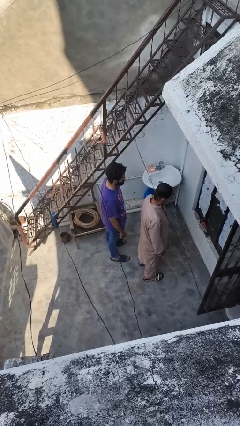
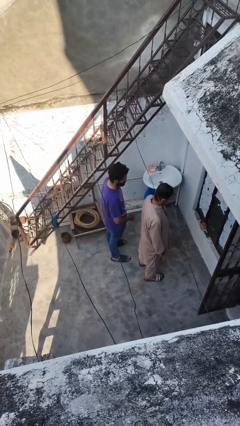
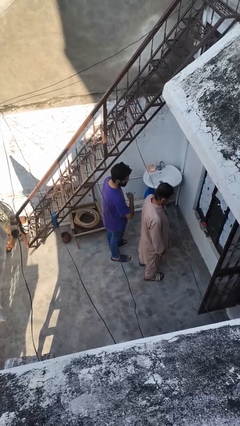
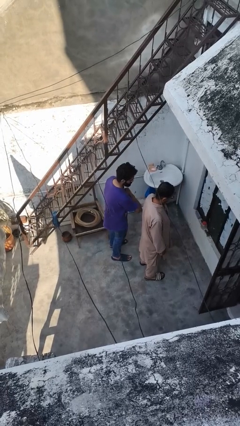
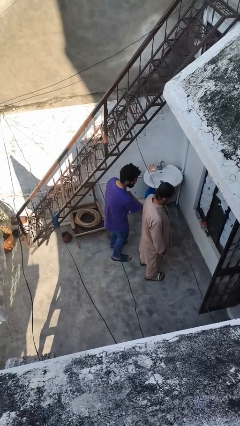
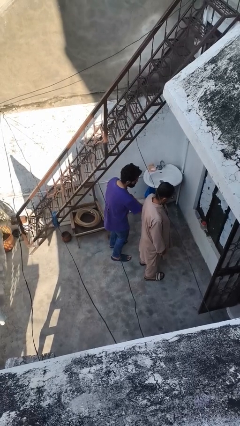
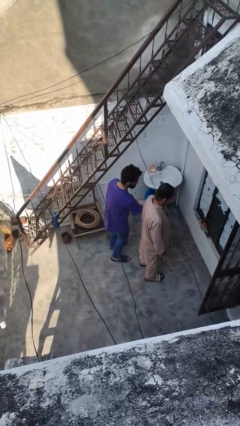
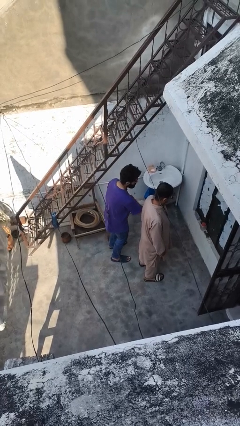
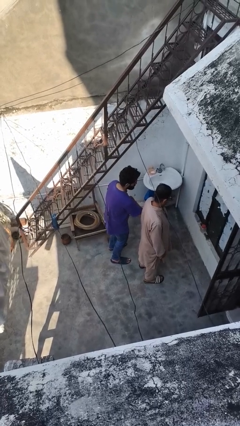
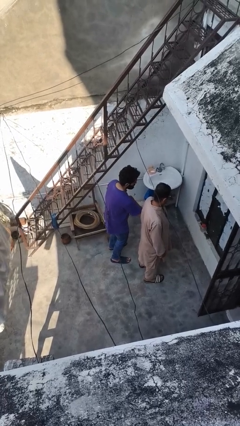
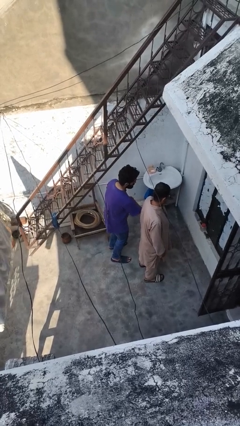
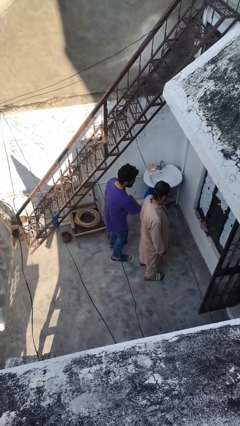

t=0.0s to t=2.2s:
person nudges person with elbow

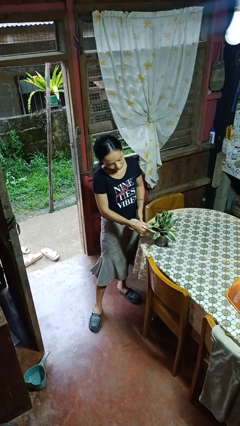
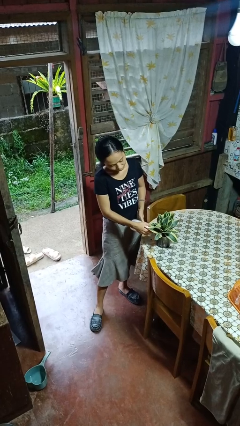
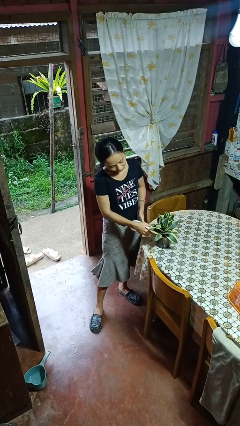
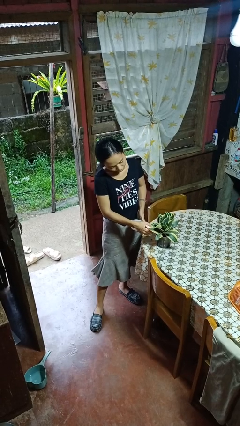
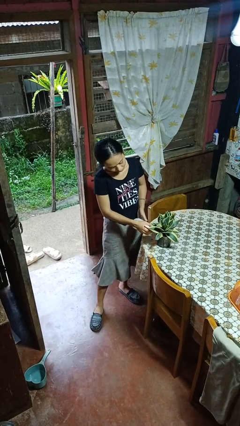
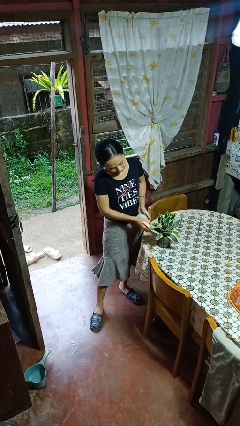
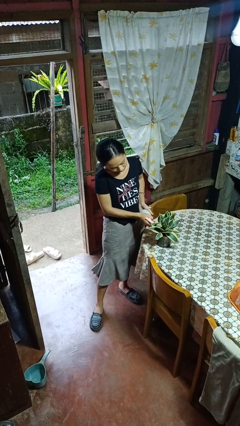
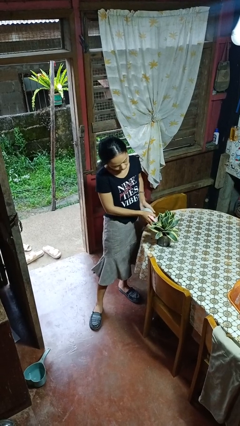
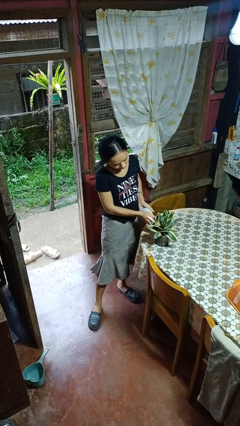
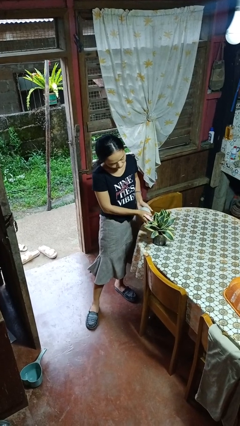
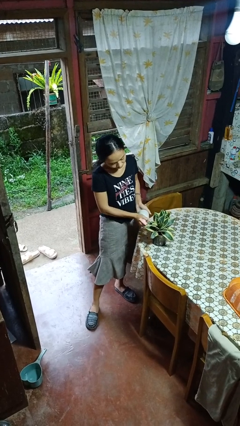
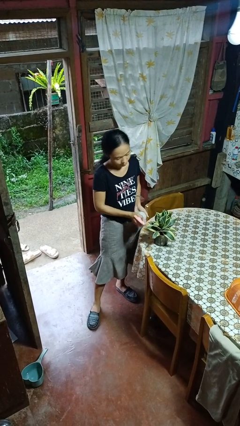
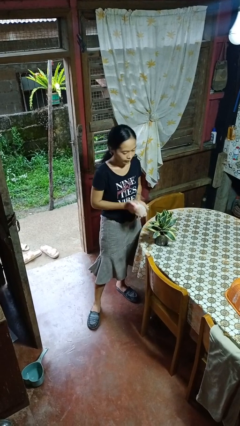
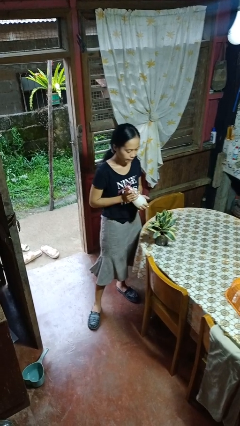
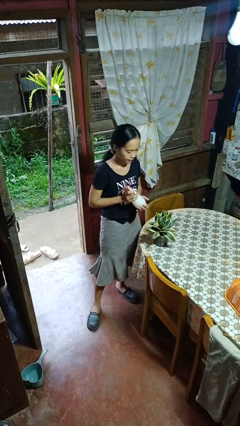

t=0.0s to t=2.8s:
person waters houseplant

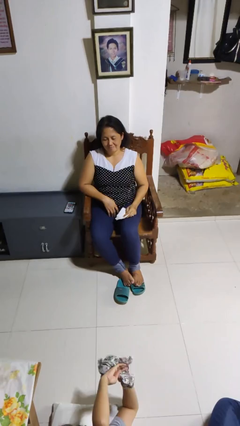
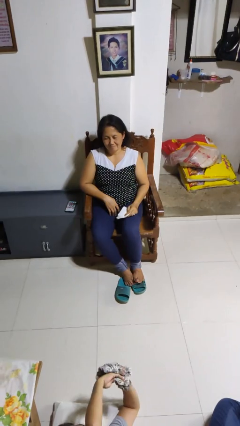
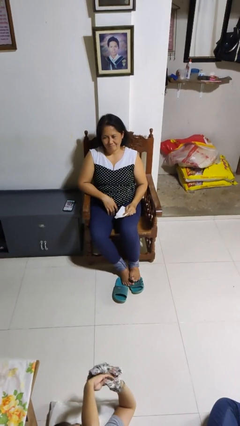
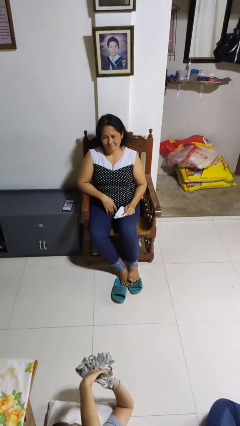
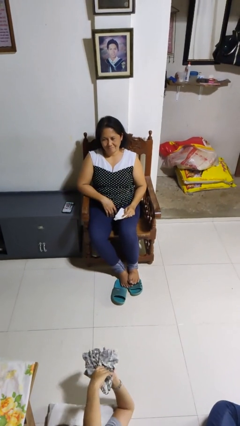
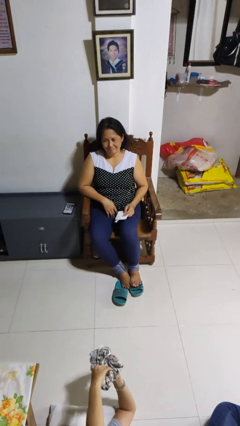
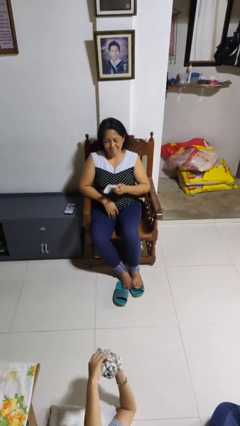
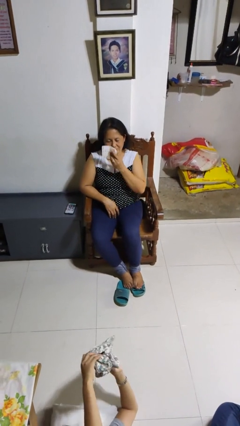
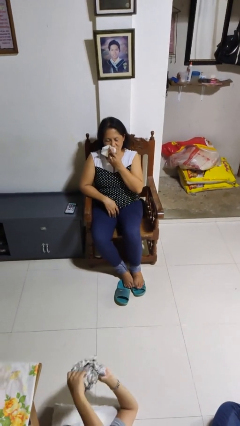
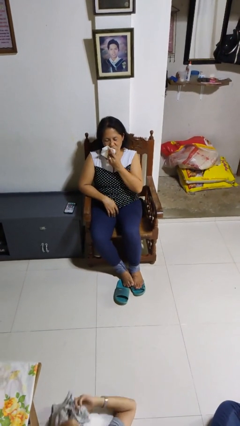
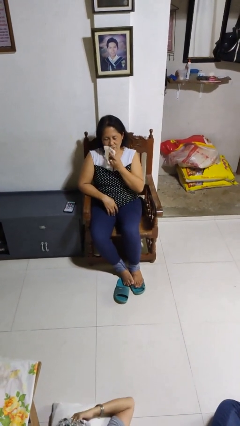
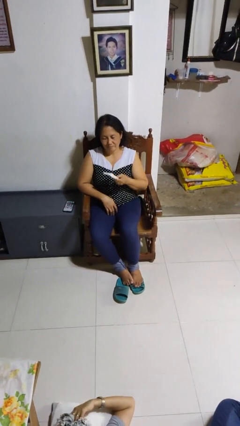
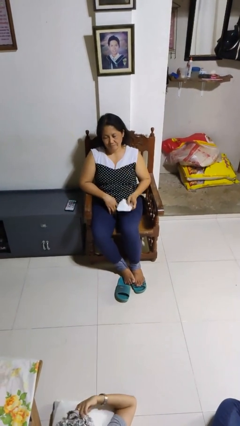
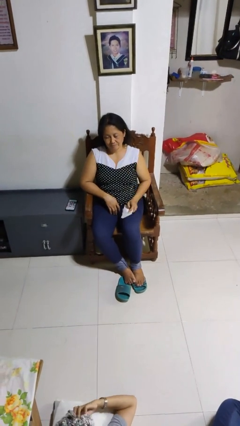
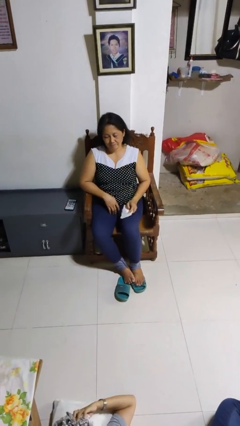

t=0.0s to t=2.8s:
person wipes mouth with napkin

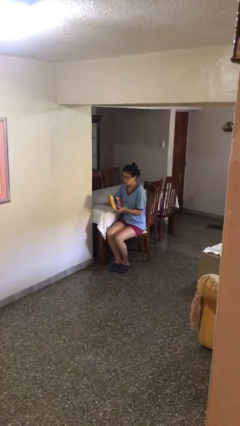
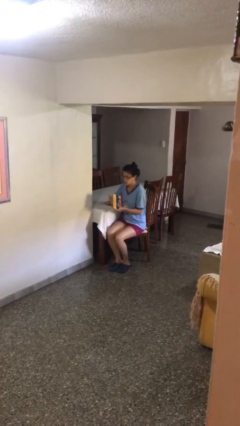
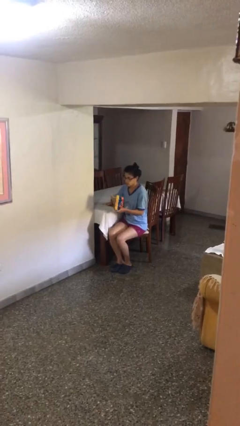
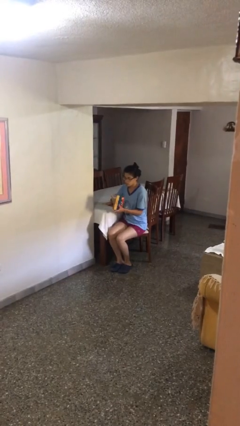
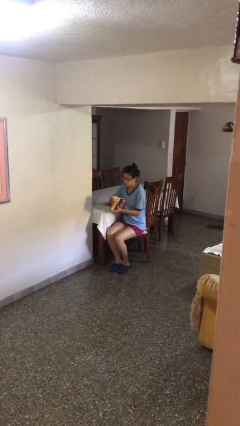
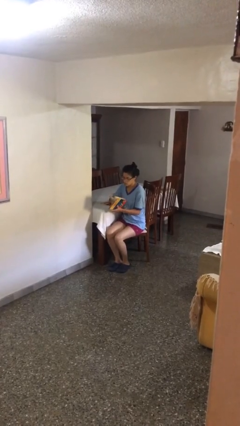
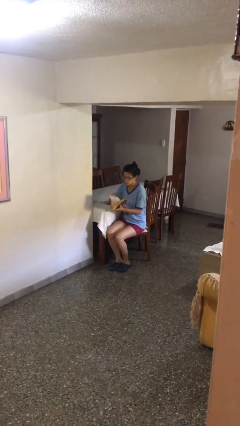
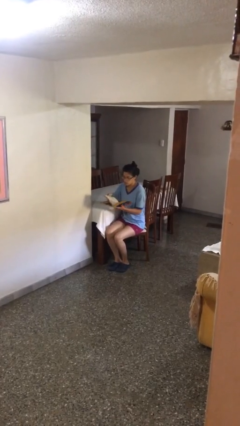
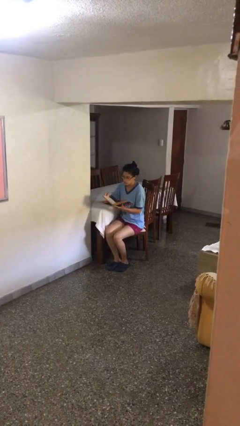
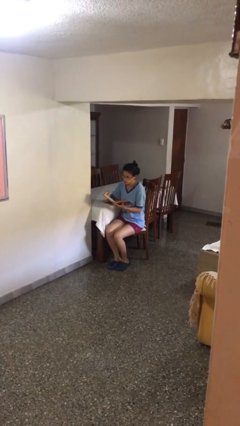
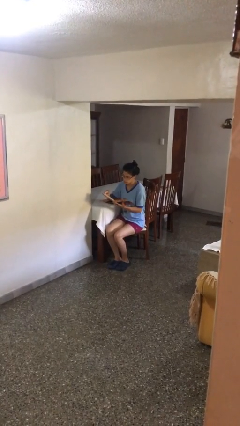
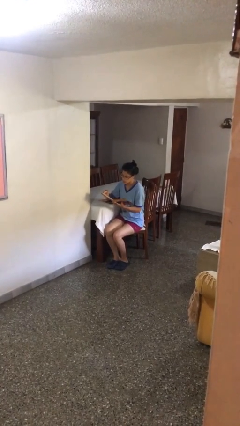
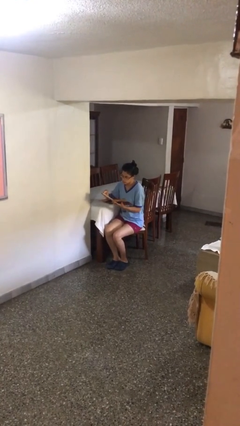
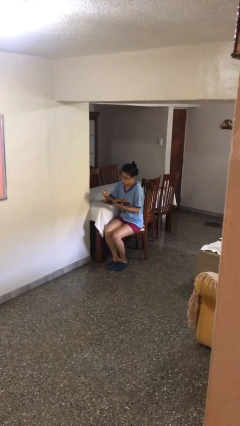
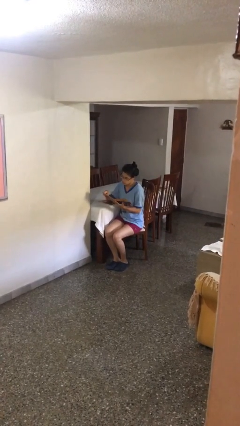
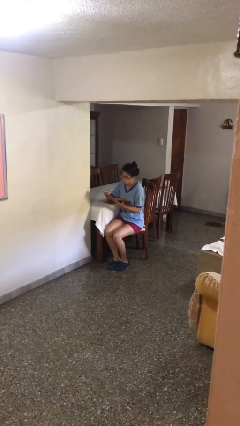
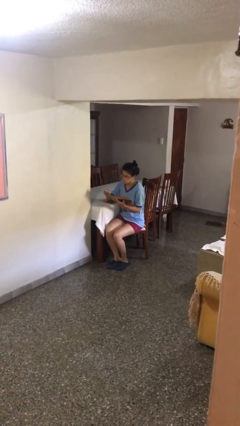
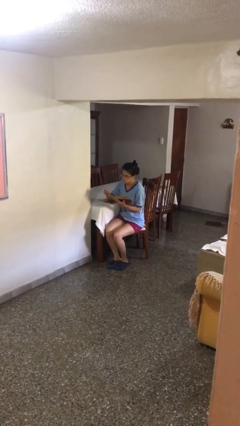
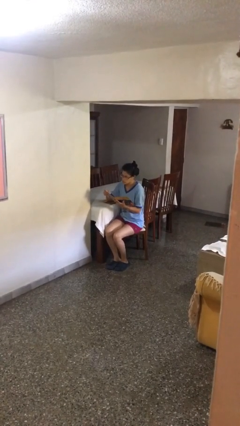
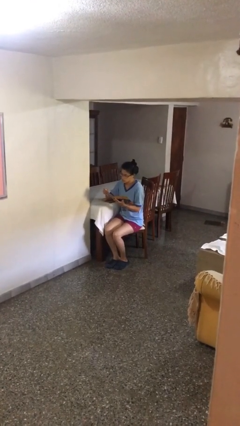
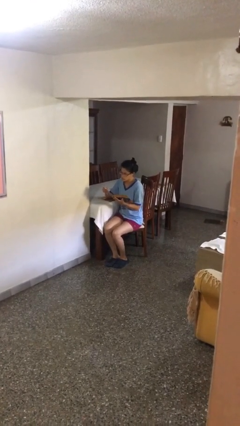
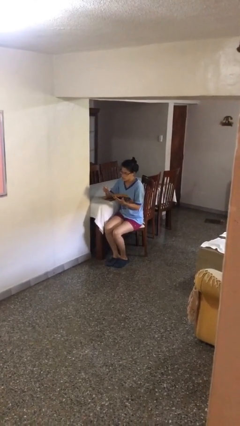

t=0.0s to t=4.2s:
person reads document

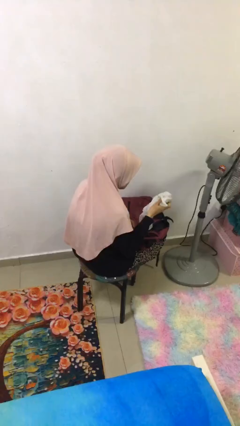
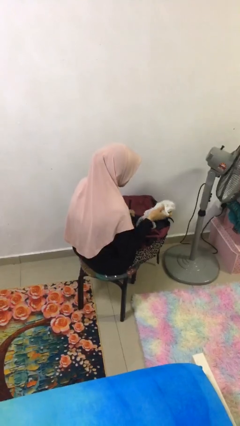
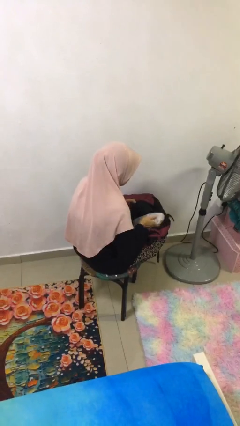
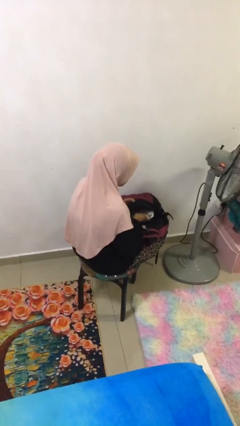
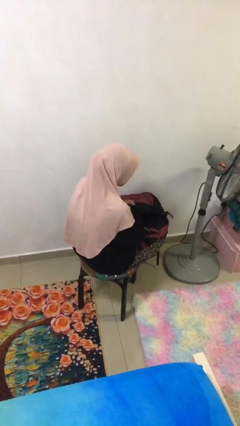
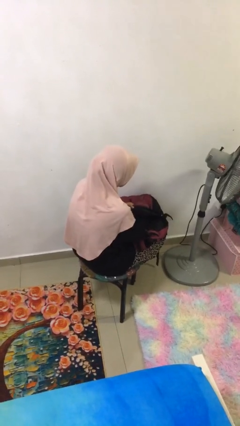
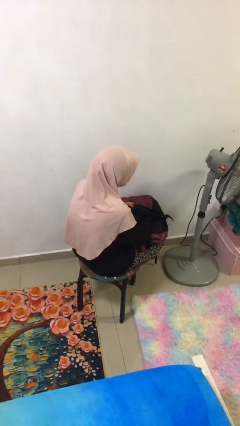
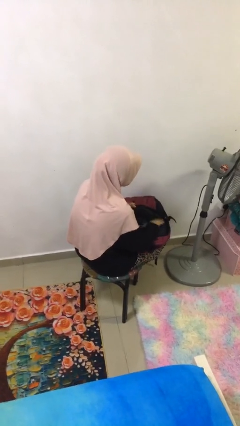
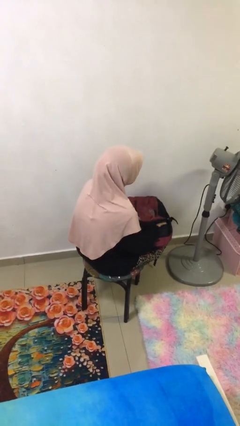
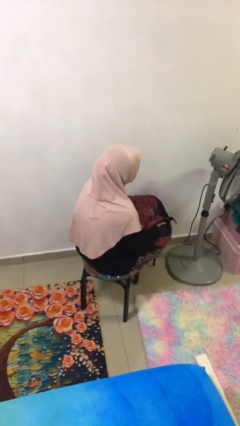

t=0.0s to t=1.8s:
person puts object into backpack

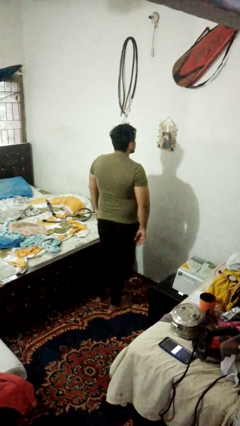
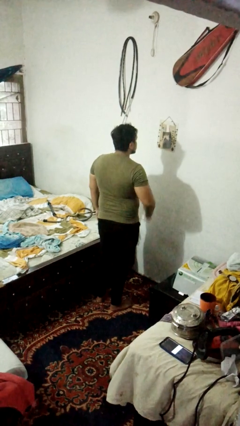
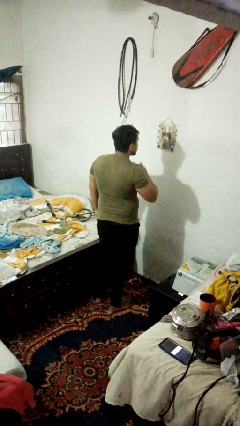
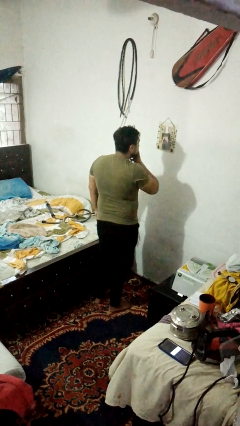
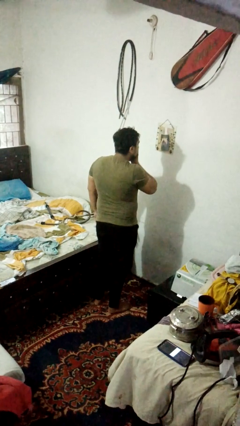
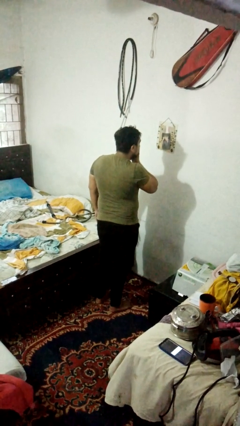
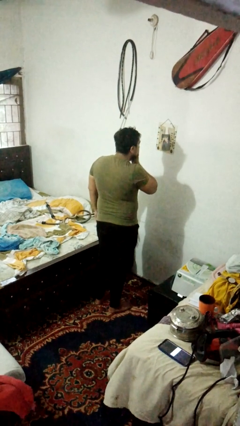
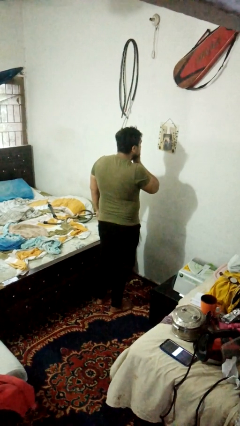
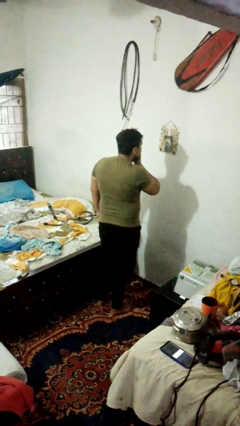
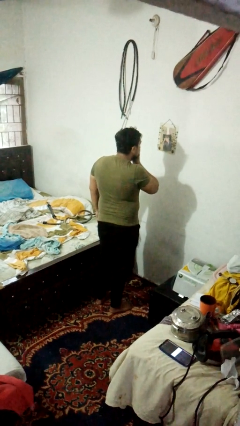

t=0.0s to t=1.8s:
person strokes chin

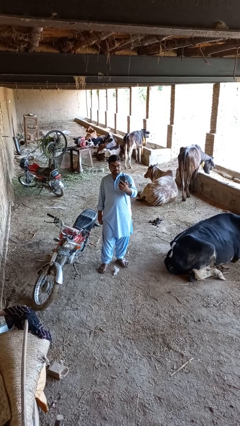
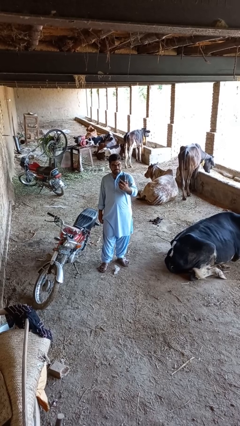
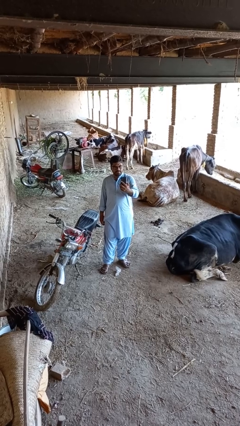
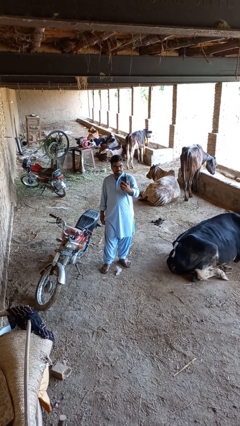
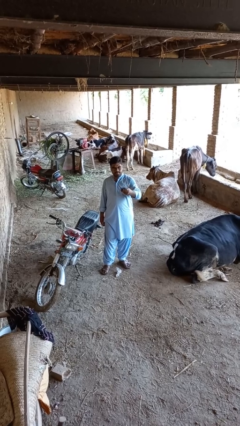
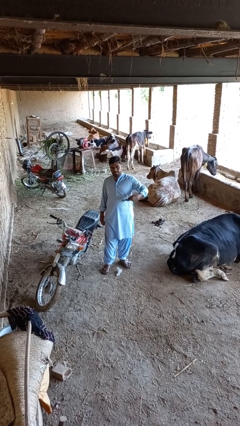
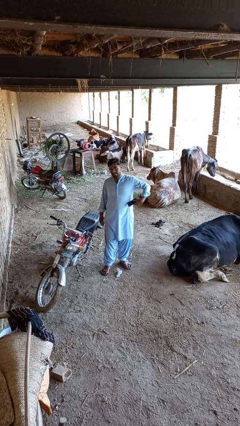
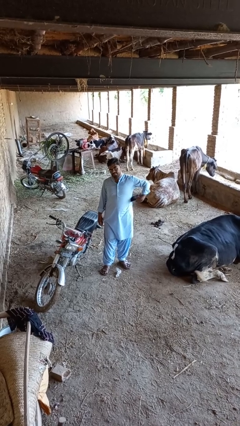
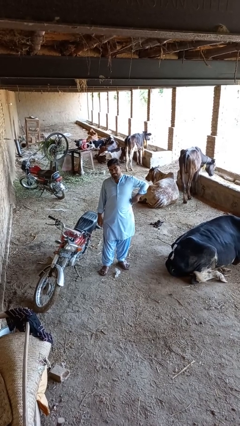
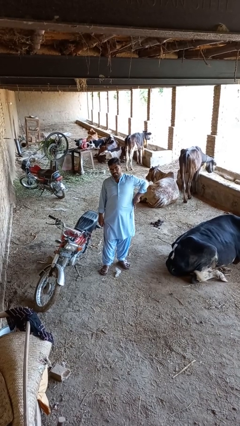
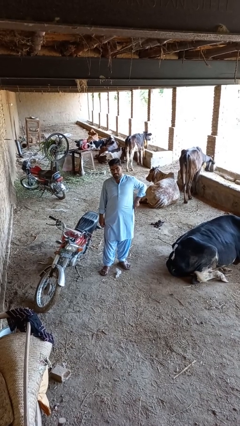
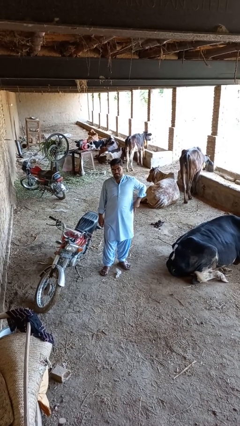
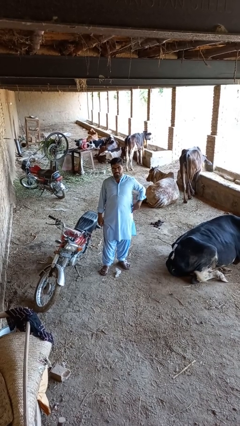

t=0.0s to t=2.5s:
person puts phone into pocket
